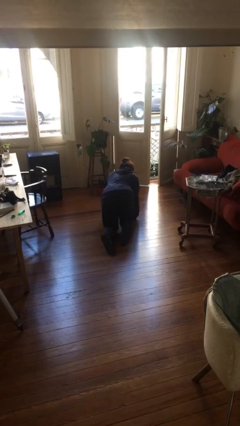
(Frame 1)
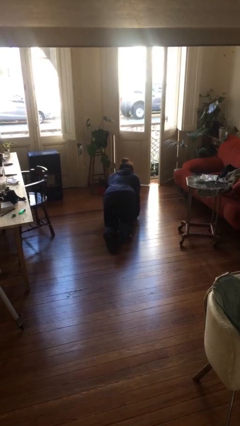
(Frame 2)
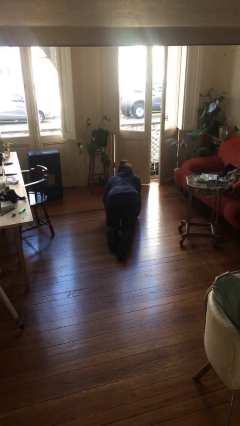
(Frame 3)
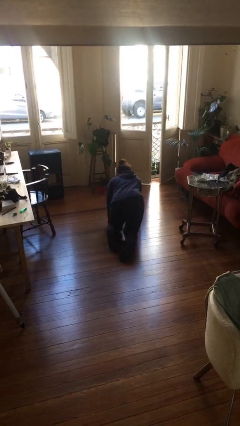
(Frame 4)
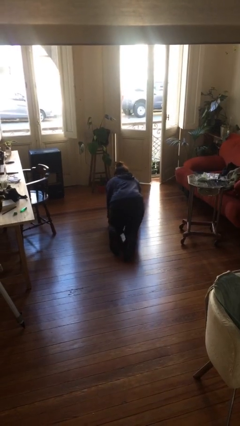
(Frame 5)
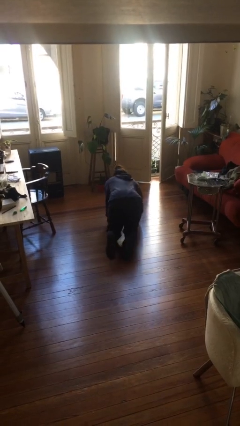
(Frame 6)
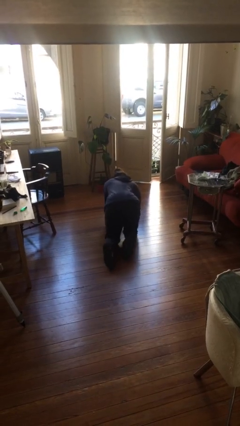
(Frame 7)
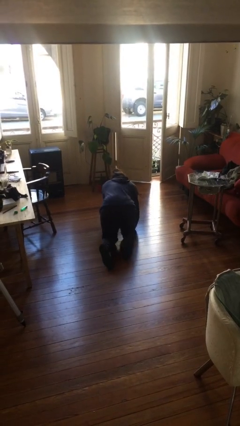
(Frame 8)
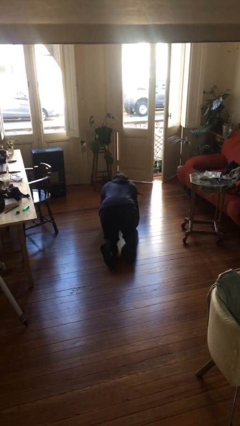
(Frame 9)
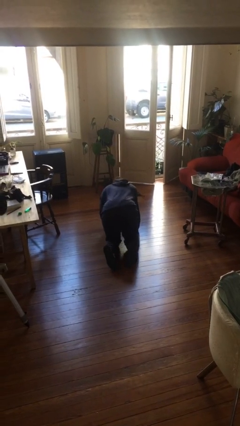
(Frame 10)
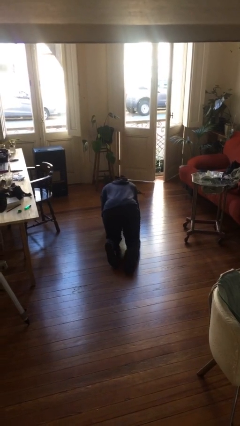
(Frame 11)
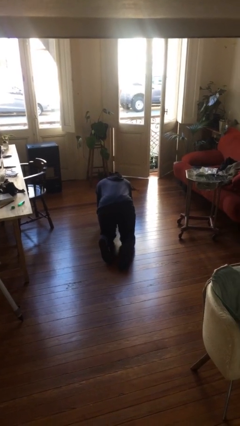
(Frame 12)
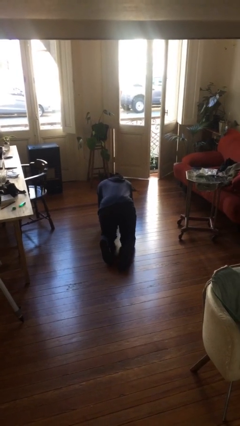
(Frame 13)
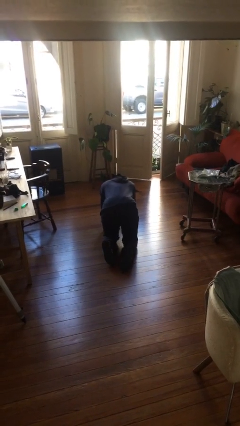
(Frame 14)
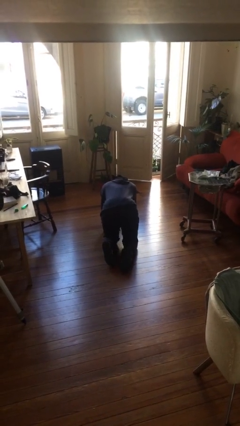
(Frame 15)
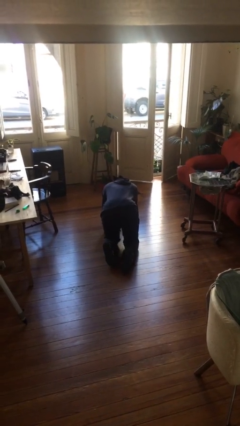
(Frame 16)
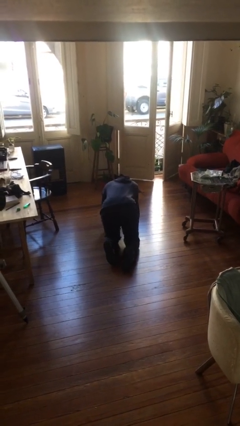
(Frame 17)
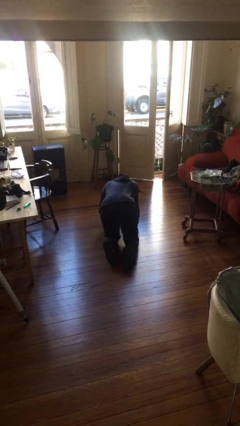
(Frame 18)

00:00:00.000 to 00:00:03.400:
person crawls

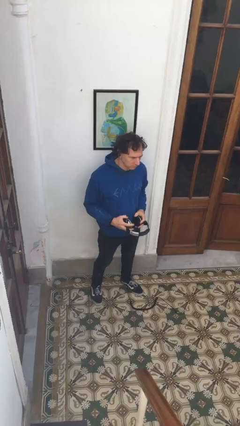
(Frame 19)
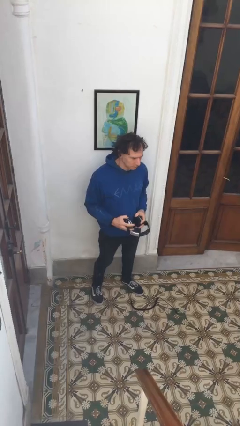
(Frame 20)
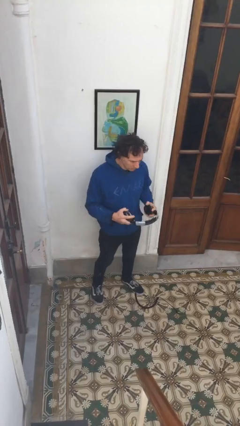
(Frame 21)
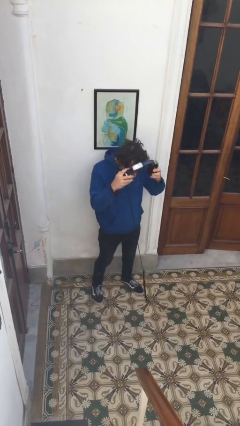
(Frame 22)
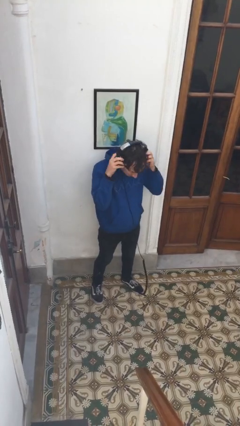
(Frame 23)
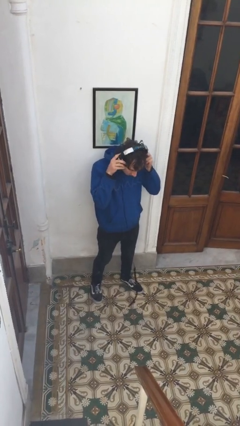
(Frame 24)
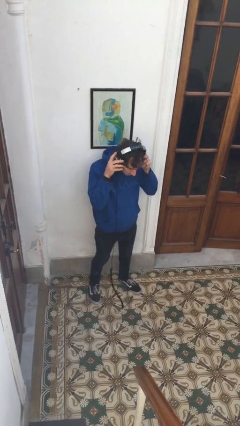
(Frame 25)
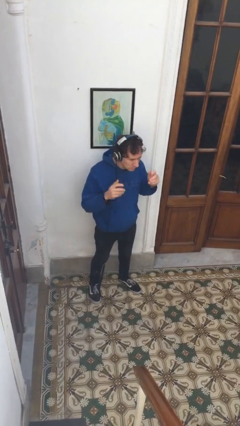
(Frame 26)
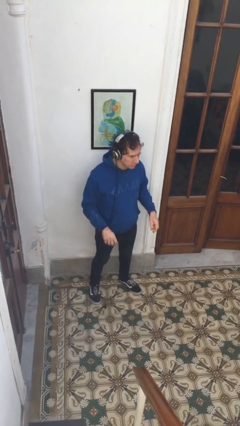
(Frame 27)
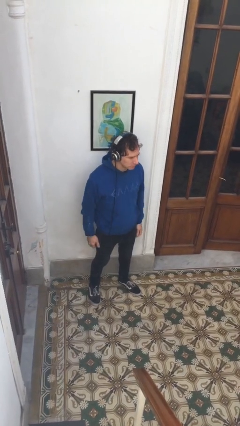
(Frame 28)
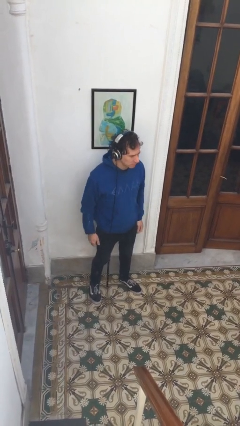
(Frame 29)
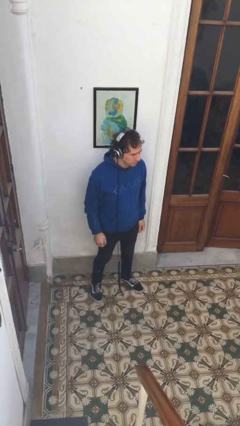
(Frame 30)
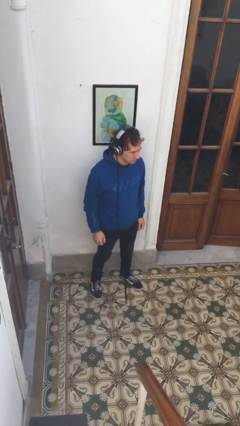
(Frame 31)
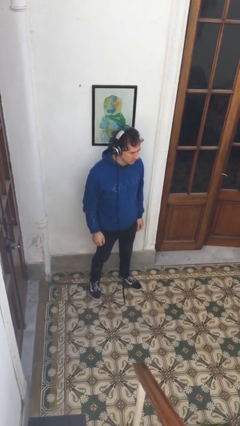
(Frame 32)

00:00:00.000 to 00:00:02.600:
person puts on headphones

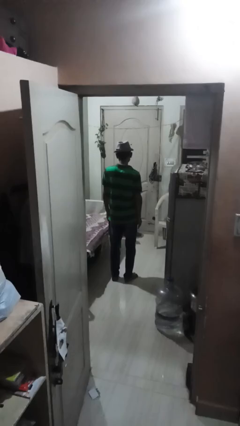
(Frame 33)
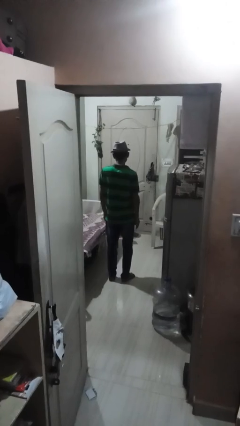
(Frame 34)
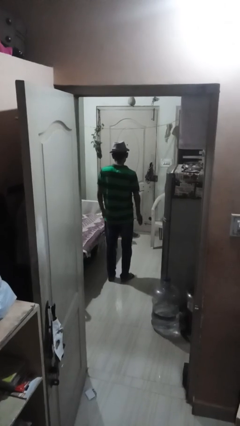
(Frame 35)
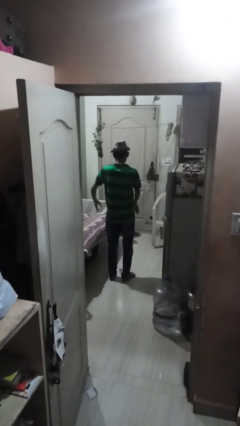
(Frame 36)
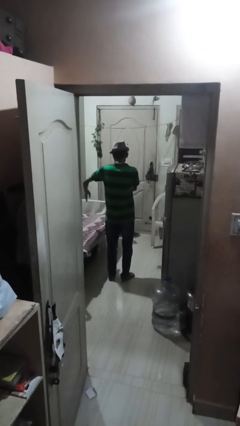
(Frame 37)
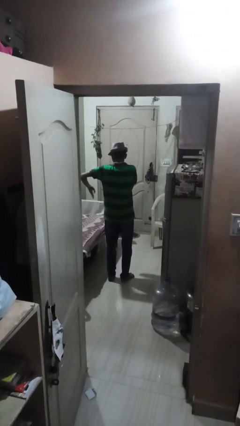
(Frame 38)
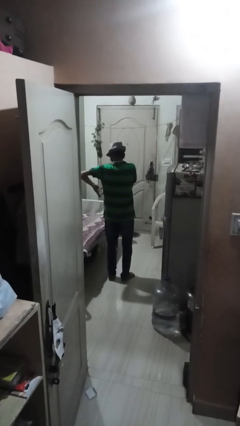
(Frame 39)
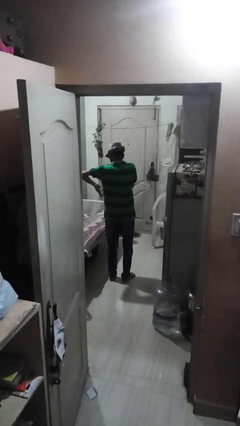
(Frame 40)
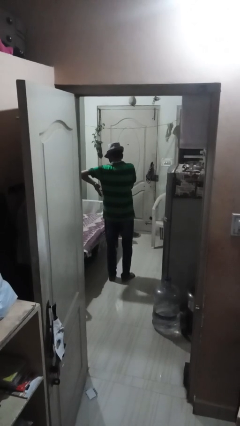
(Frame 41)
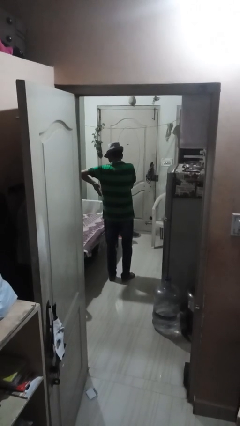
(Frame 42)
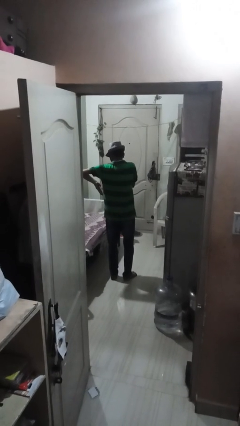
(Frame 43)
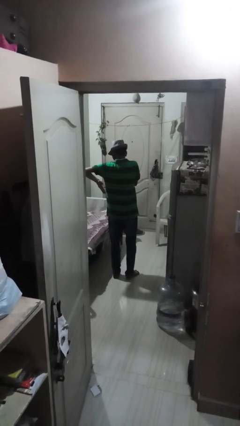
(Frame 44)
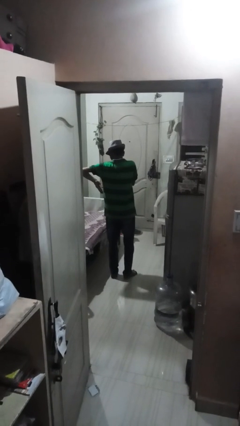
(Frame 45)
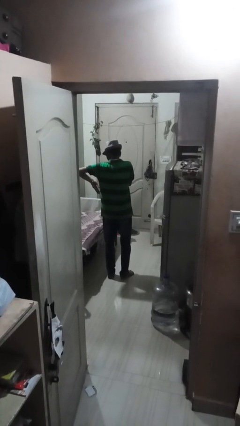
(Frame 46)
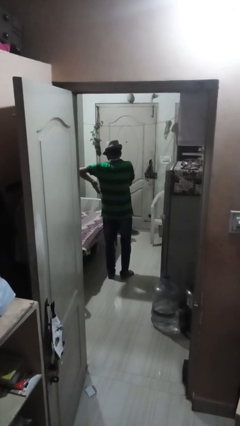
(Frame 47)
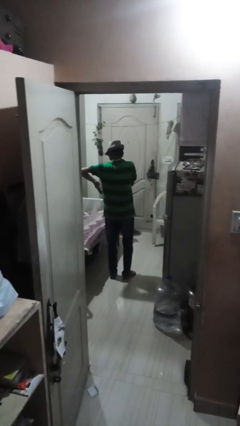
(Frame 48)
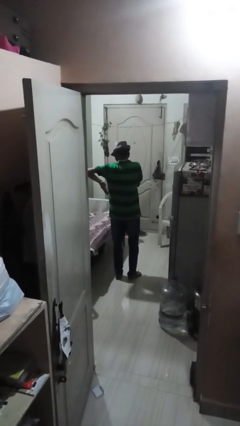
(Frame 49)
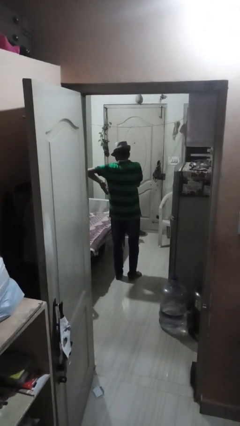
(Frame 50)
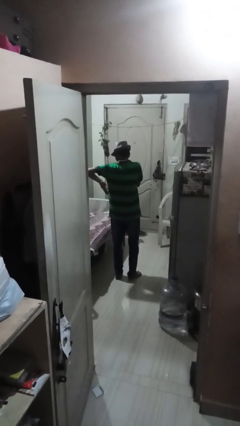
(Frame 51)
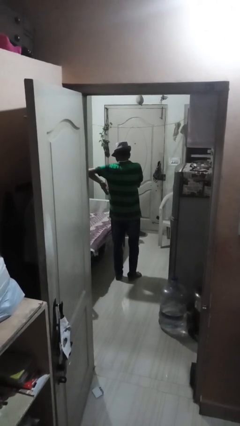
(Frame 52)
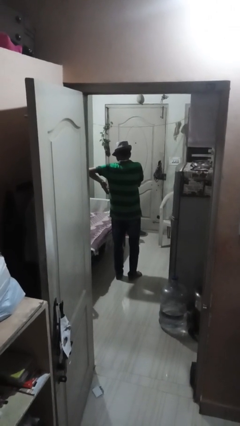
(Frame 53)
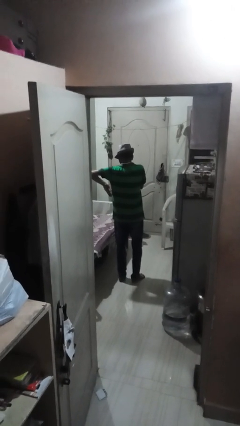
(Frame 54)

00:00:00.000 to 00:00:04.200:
person gestures heart

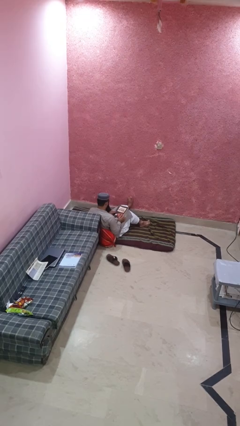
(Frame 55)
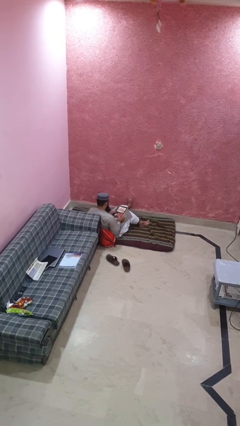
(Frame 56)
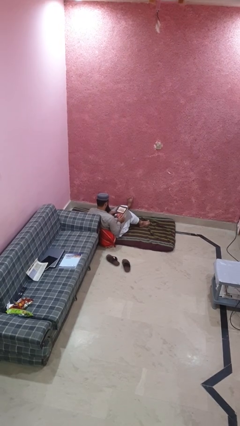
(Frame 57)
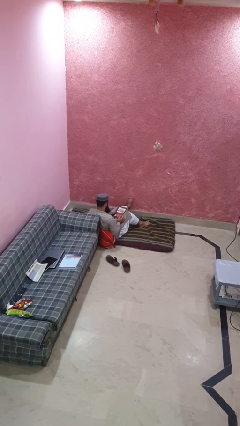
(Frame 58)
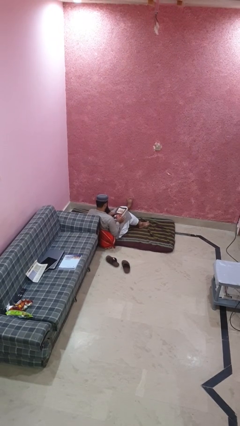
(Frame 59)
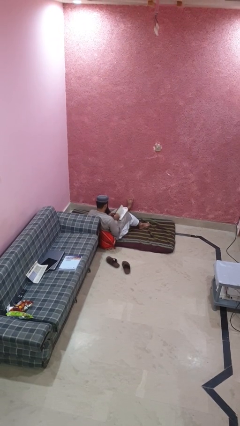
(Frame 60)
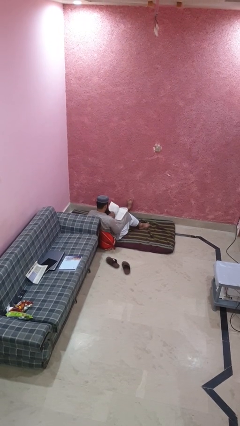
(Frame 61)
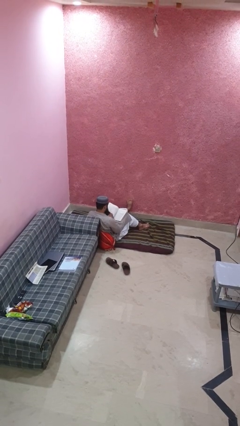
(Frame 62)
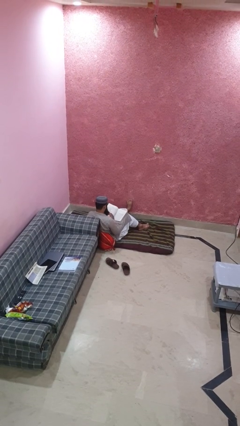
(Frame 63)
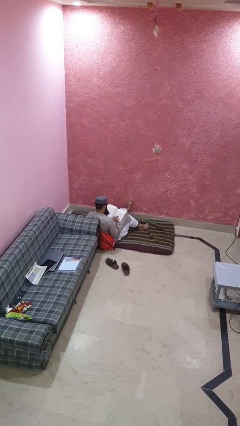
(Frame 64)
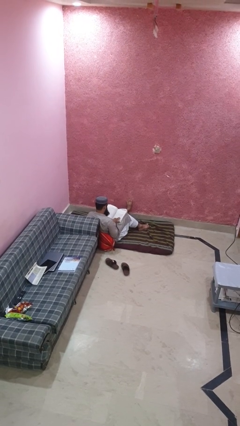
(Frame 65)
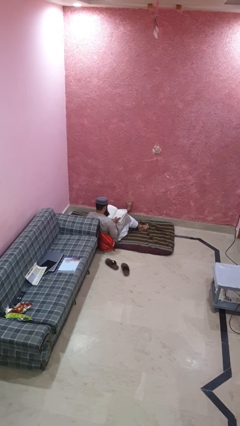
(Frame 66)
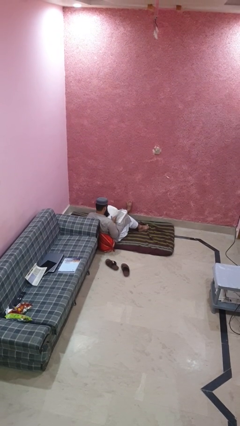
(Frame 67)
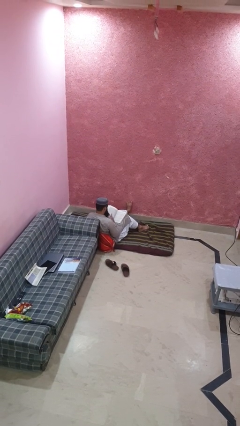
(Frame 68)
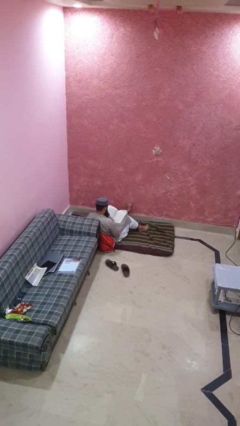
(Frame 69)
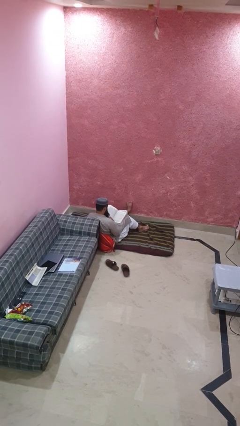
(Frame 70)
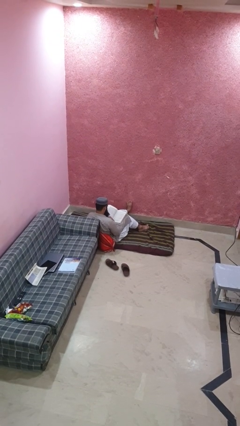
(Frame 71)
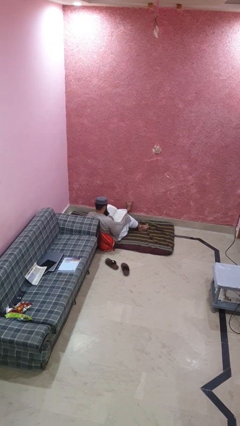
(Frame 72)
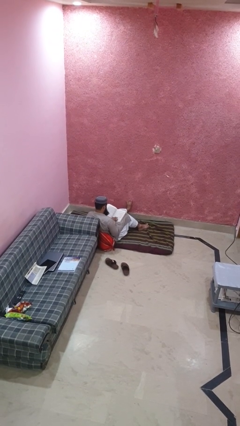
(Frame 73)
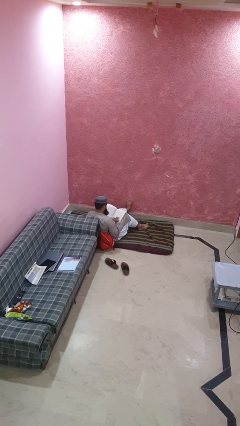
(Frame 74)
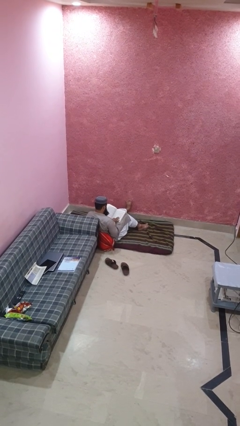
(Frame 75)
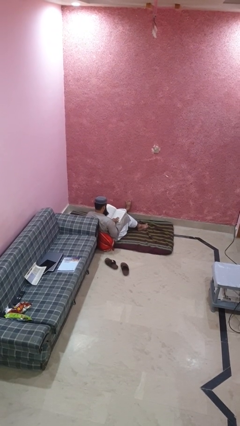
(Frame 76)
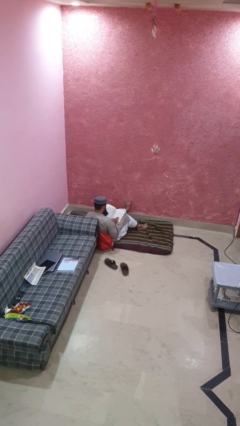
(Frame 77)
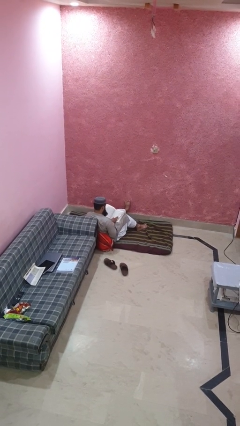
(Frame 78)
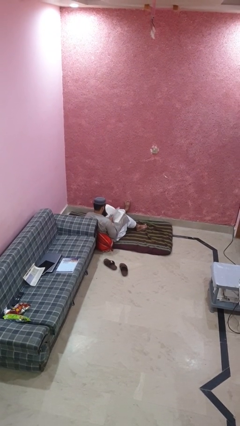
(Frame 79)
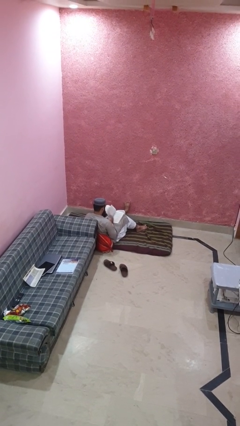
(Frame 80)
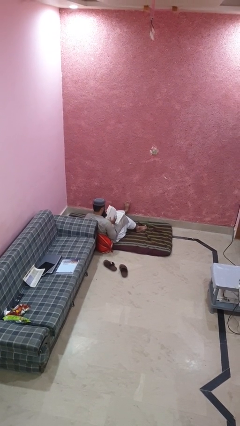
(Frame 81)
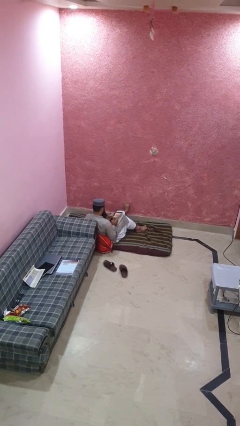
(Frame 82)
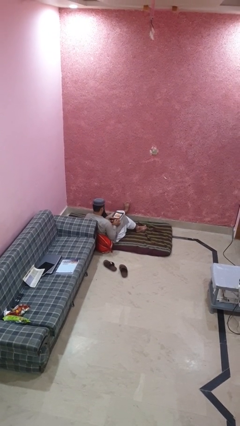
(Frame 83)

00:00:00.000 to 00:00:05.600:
person reads book

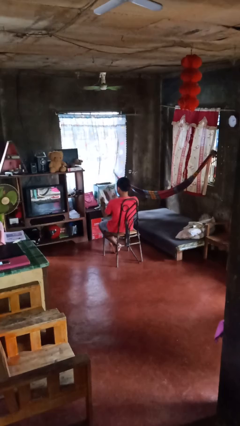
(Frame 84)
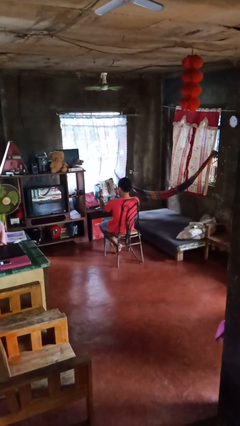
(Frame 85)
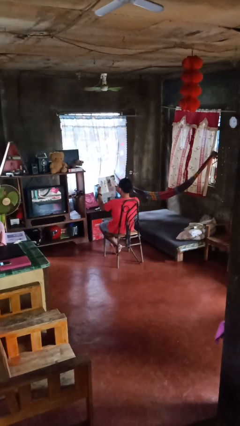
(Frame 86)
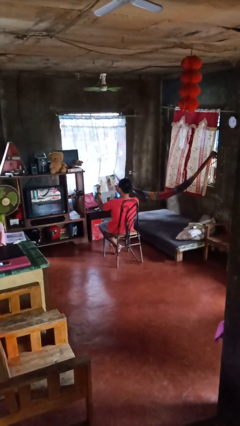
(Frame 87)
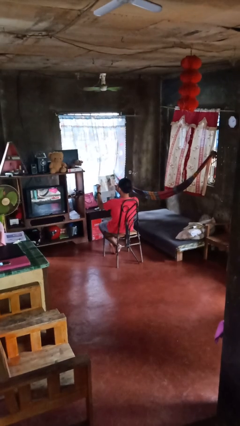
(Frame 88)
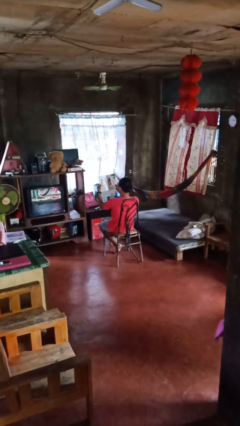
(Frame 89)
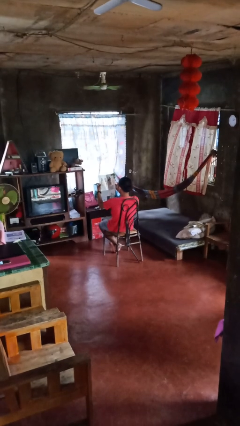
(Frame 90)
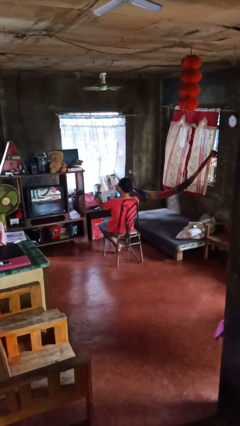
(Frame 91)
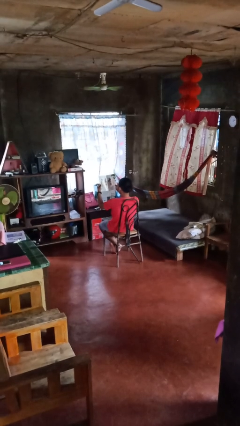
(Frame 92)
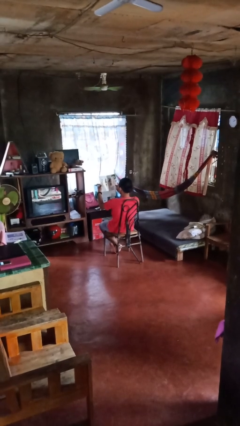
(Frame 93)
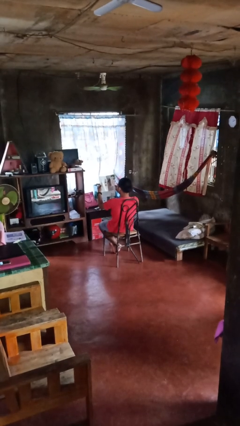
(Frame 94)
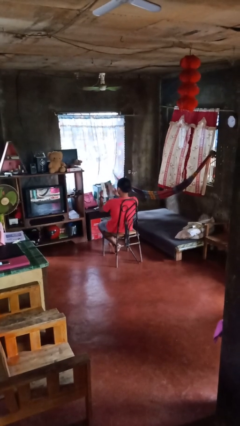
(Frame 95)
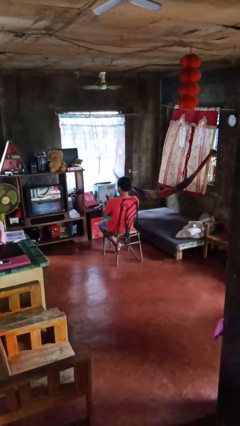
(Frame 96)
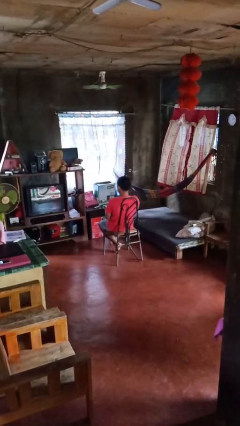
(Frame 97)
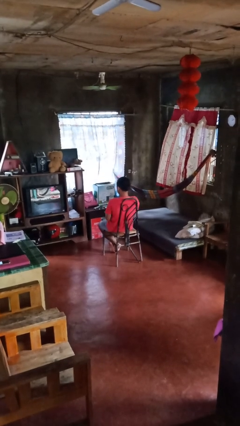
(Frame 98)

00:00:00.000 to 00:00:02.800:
person reads magazine
